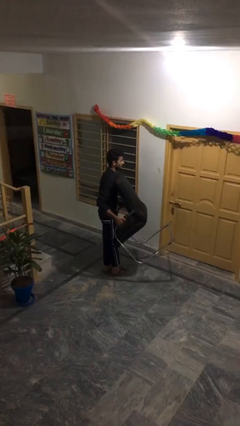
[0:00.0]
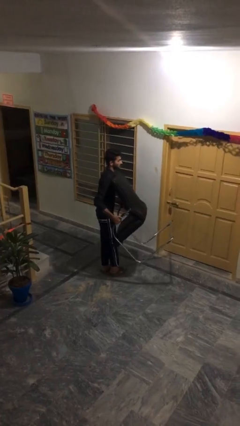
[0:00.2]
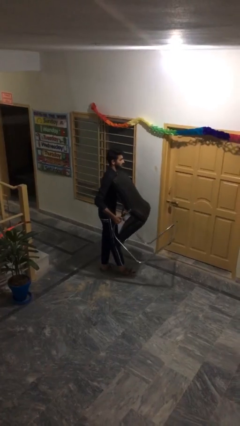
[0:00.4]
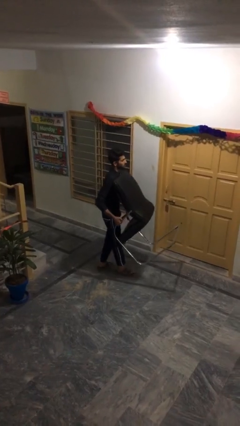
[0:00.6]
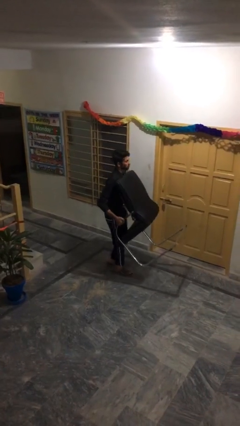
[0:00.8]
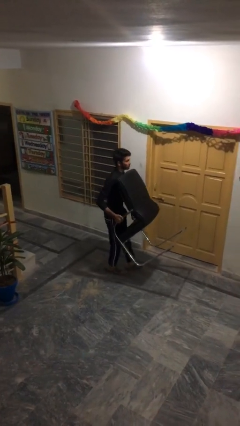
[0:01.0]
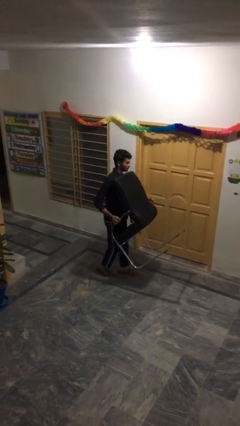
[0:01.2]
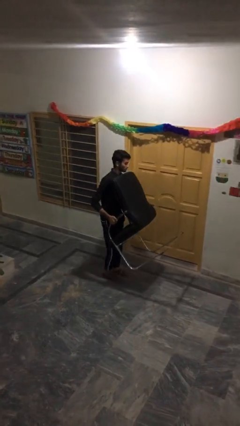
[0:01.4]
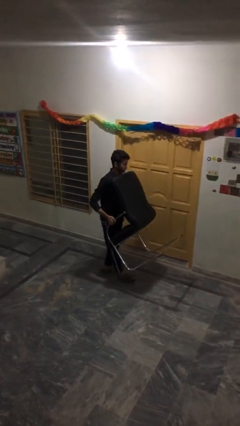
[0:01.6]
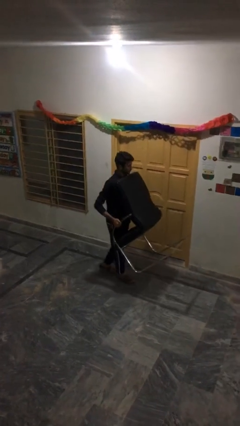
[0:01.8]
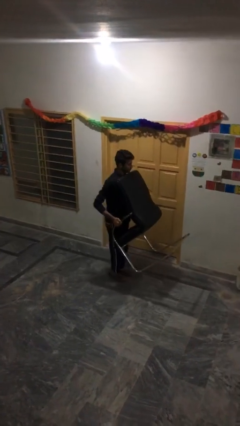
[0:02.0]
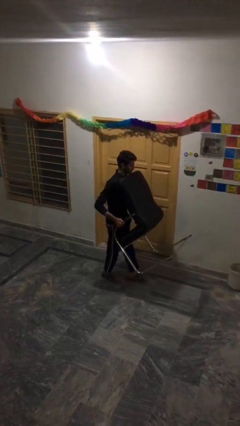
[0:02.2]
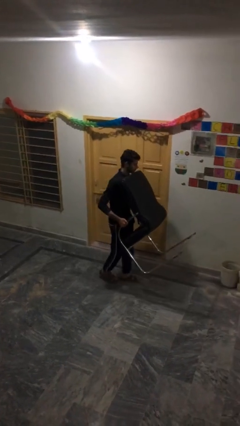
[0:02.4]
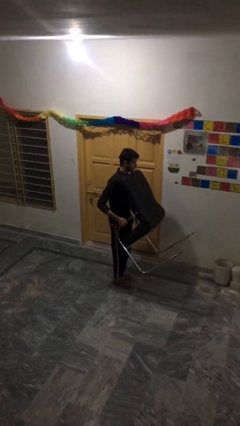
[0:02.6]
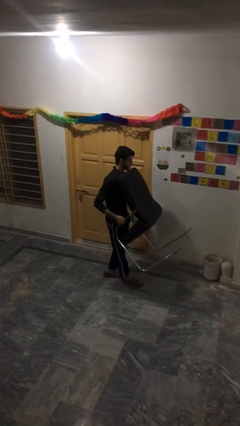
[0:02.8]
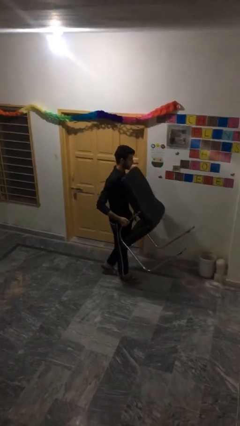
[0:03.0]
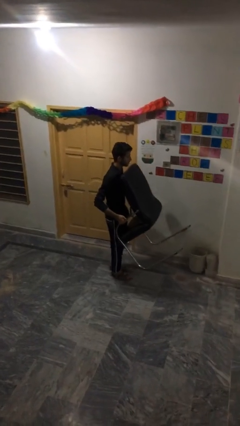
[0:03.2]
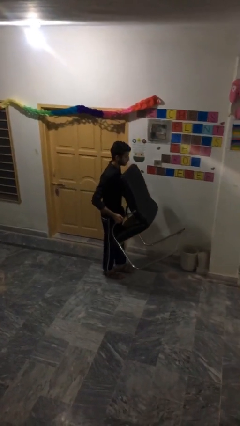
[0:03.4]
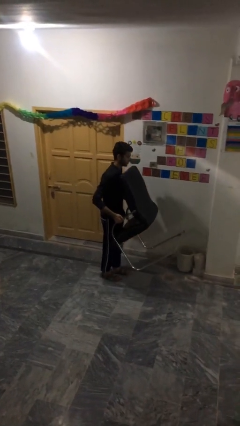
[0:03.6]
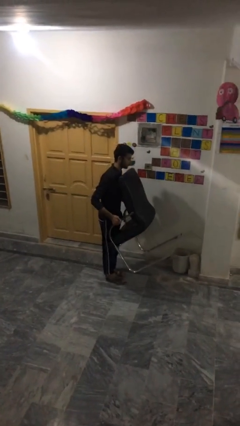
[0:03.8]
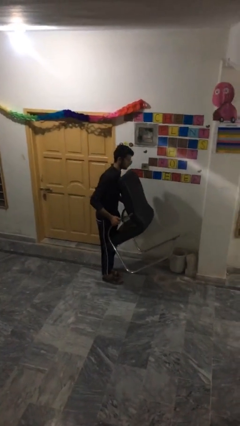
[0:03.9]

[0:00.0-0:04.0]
person carries heavy object

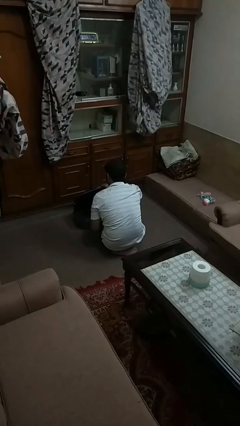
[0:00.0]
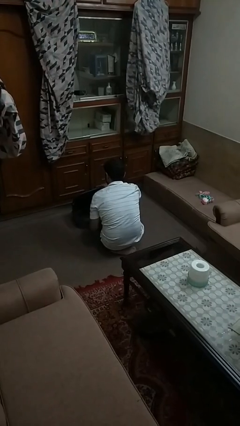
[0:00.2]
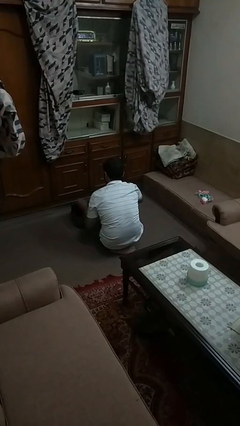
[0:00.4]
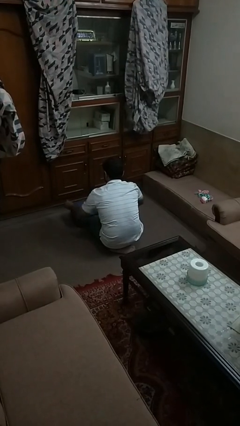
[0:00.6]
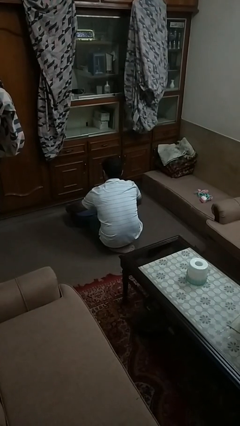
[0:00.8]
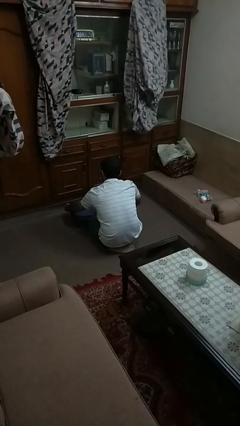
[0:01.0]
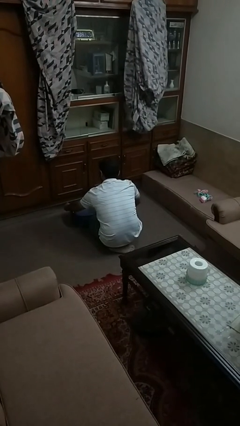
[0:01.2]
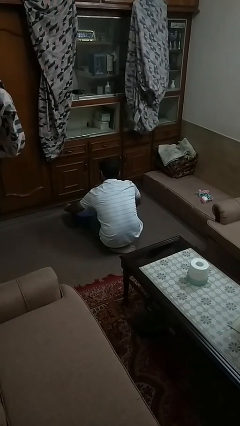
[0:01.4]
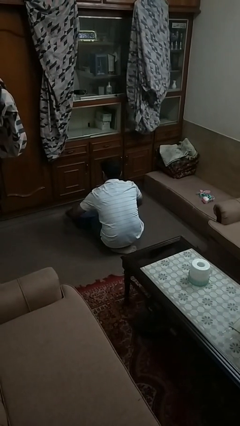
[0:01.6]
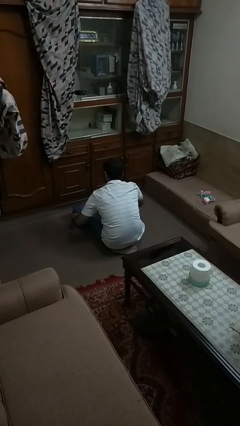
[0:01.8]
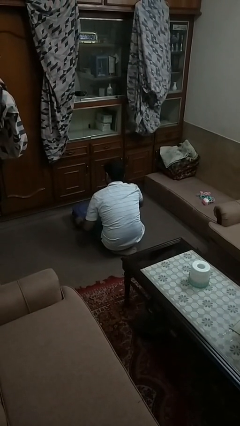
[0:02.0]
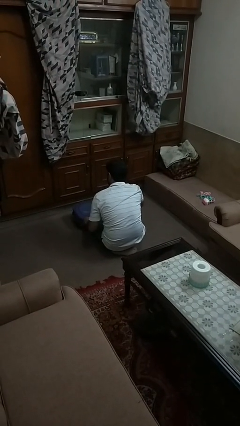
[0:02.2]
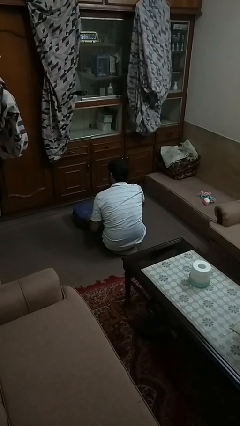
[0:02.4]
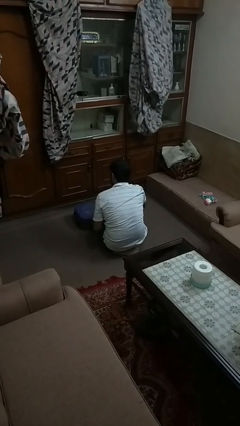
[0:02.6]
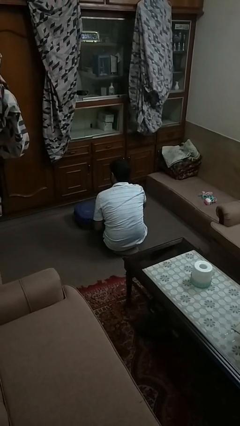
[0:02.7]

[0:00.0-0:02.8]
person closes suitcase

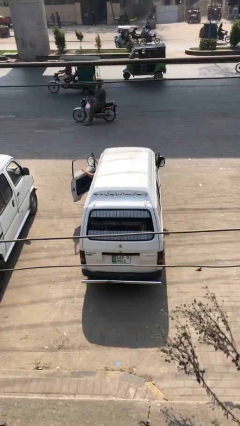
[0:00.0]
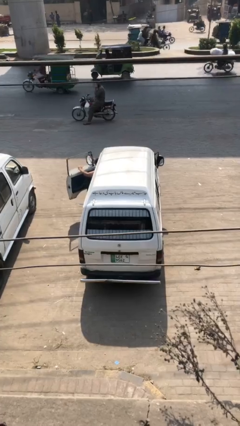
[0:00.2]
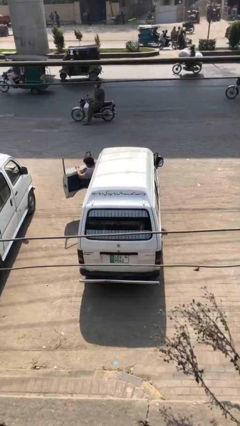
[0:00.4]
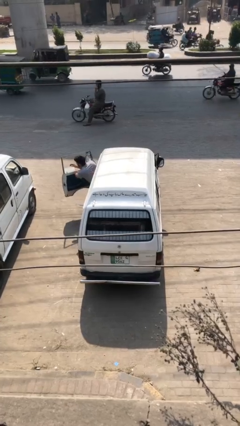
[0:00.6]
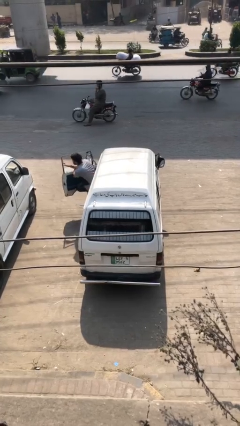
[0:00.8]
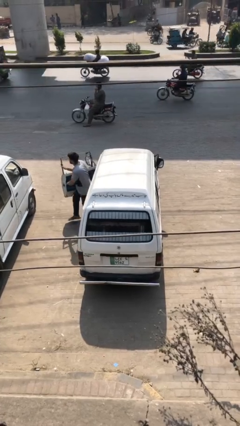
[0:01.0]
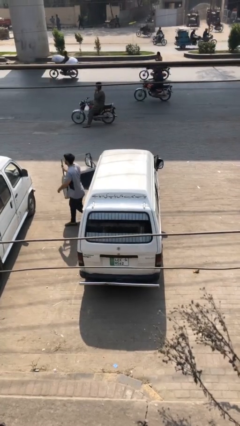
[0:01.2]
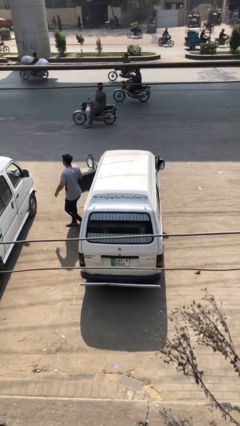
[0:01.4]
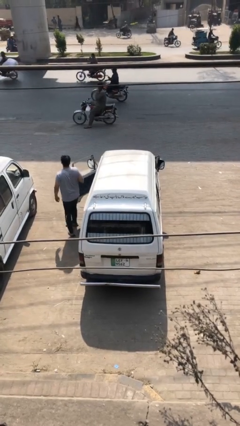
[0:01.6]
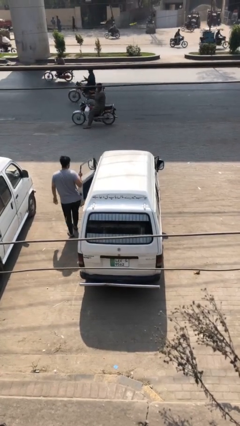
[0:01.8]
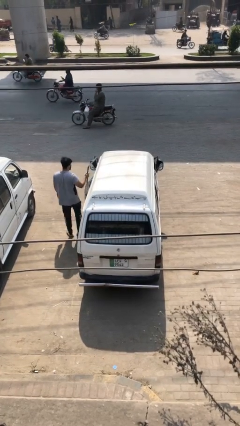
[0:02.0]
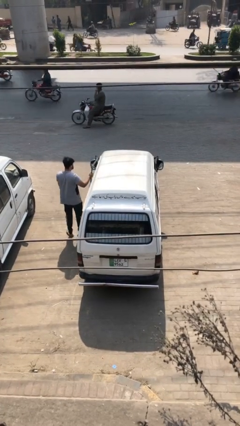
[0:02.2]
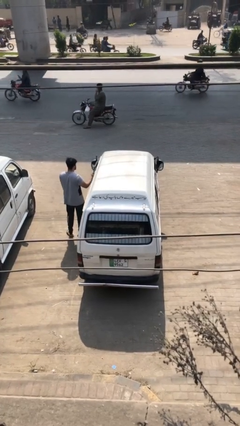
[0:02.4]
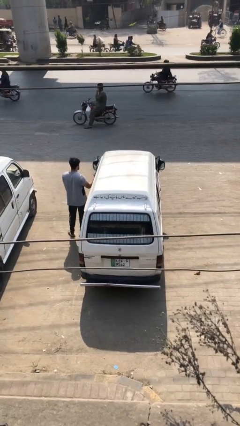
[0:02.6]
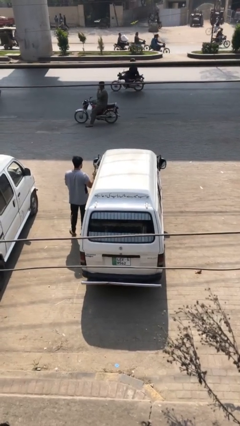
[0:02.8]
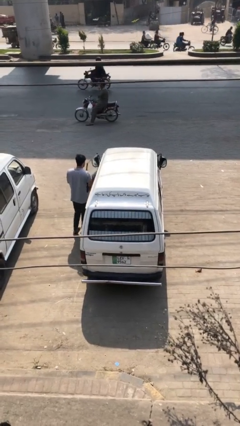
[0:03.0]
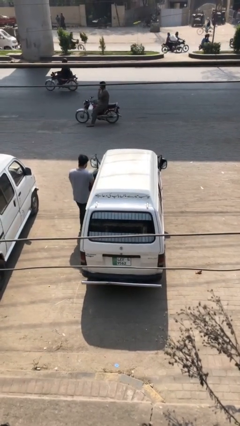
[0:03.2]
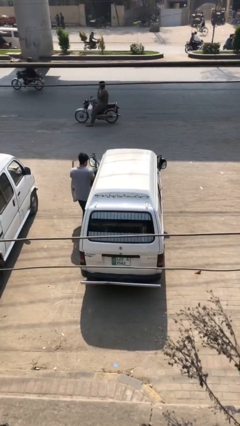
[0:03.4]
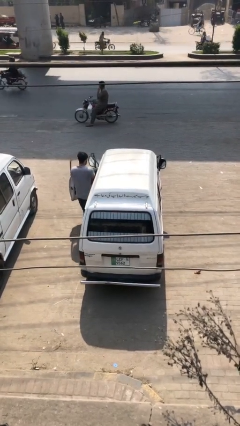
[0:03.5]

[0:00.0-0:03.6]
car drops off person

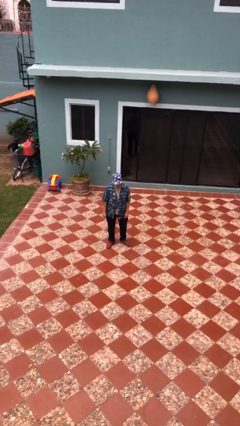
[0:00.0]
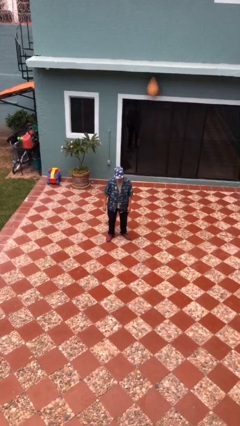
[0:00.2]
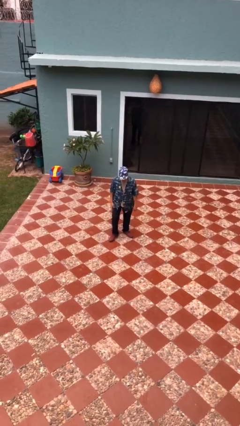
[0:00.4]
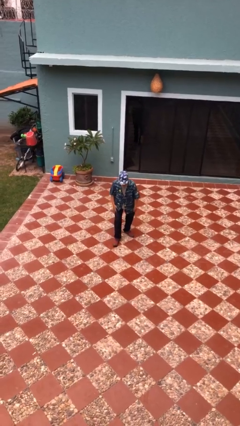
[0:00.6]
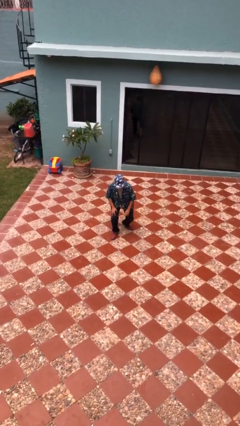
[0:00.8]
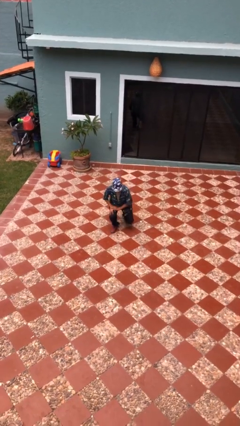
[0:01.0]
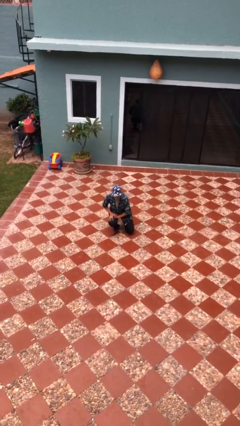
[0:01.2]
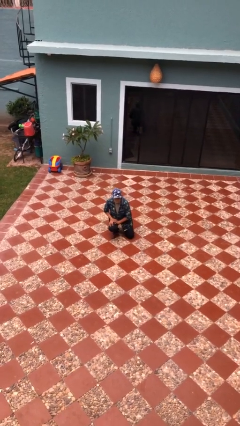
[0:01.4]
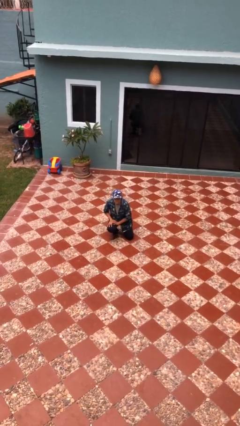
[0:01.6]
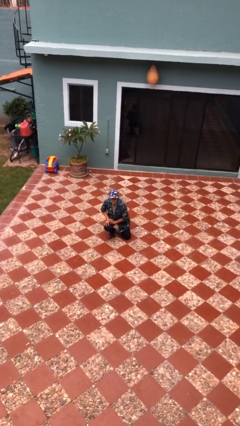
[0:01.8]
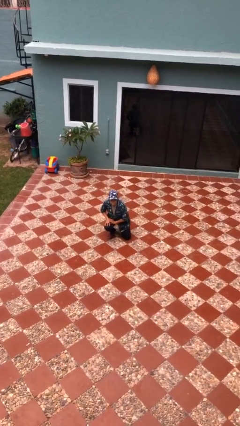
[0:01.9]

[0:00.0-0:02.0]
person kneels

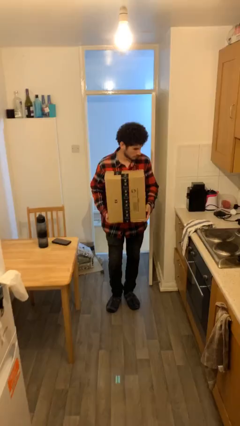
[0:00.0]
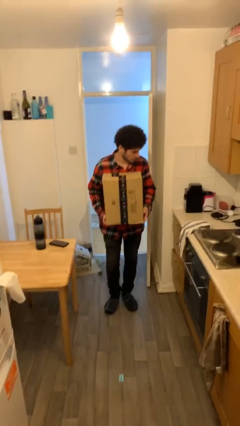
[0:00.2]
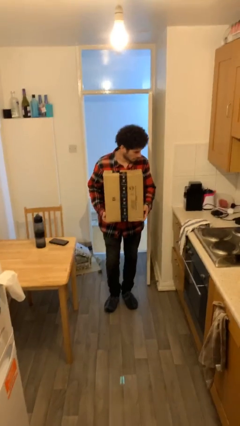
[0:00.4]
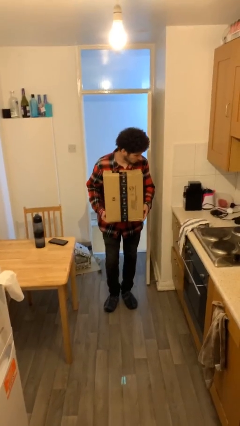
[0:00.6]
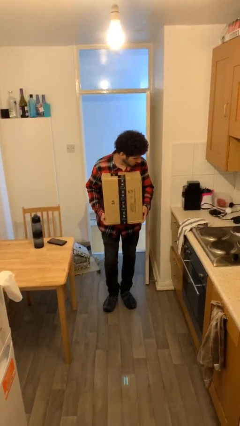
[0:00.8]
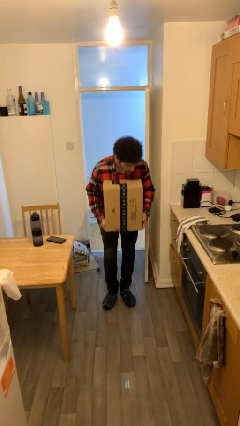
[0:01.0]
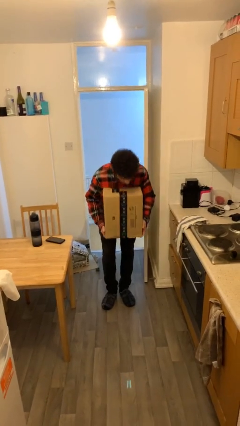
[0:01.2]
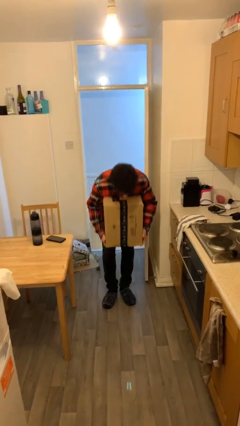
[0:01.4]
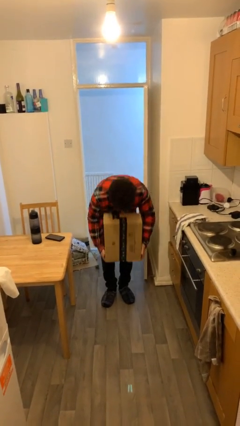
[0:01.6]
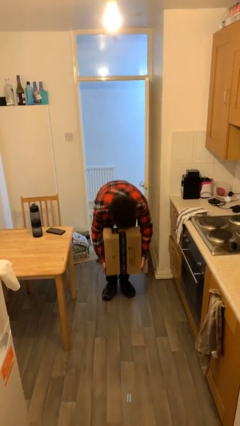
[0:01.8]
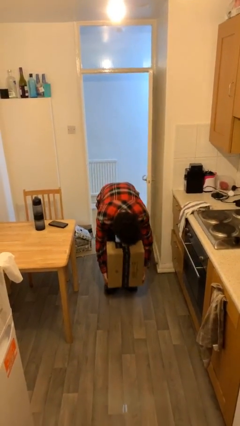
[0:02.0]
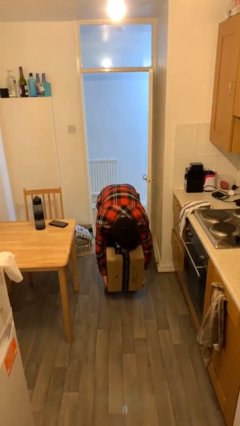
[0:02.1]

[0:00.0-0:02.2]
person puts down object on floor

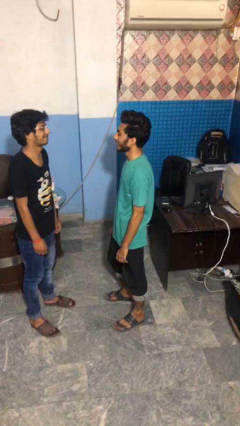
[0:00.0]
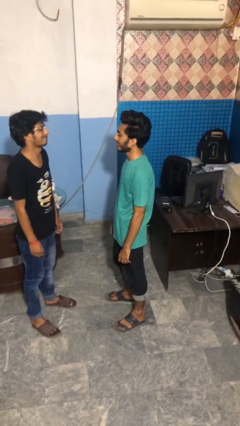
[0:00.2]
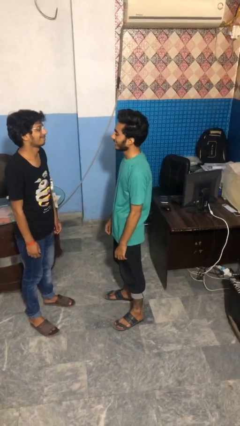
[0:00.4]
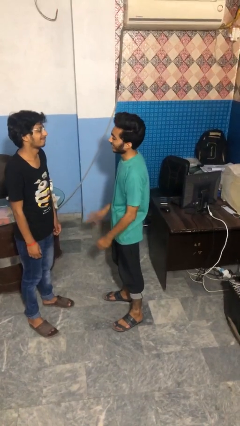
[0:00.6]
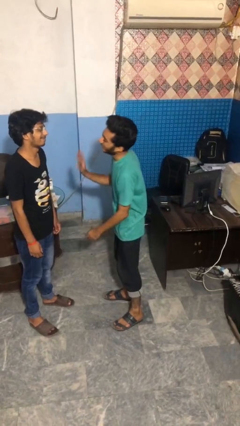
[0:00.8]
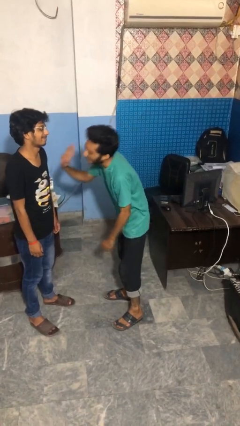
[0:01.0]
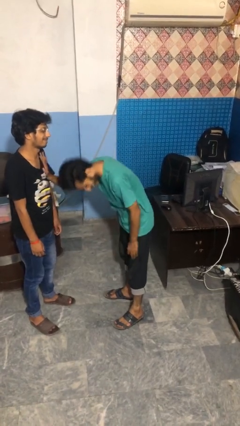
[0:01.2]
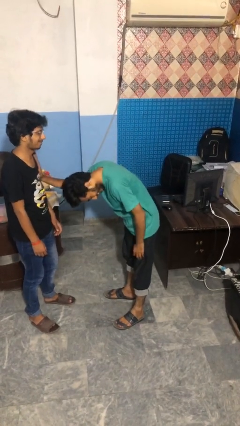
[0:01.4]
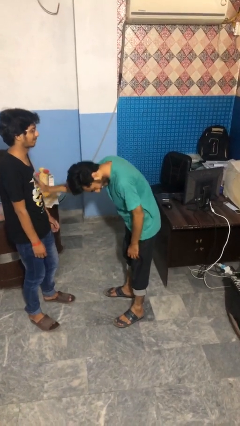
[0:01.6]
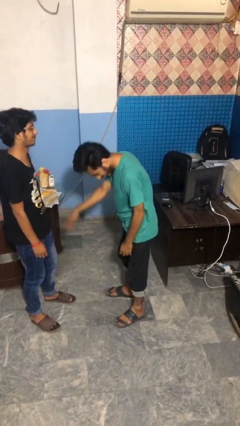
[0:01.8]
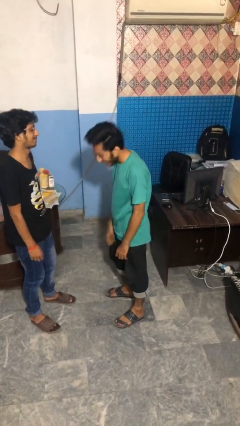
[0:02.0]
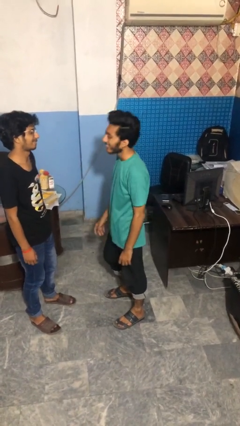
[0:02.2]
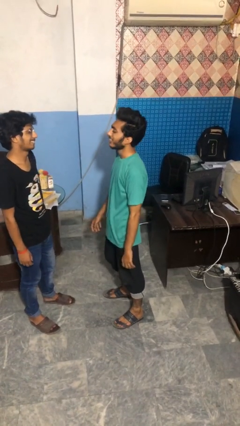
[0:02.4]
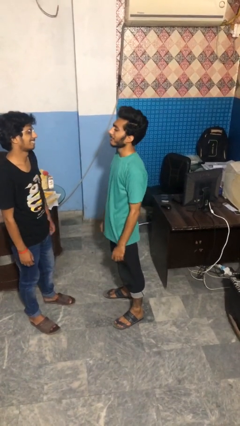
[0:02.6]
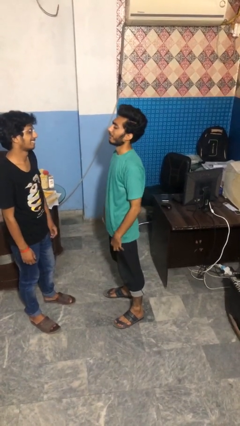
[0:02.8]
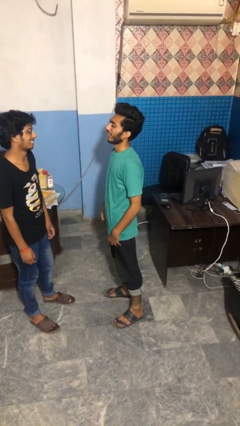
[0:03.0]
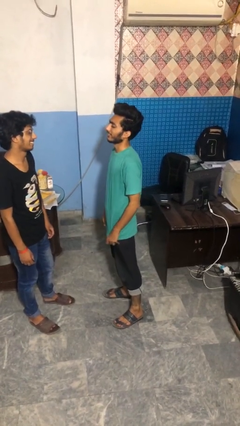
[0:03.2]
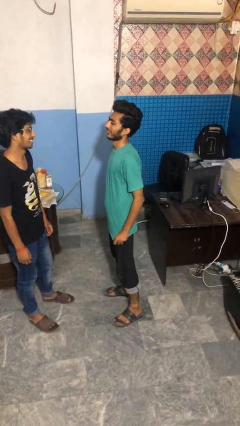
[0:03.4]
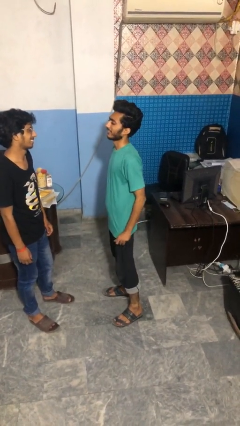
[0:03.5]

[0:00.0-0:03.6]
person shoves person
